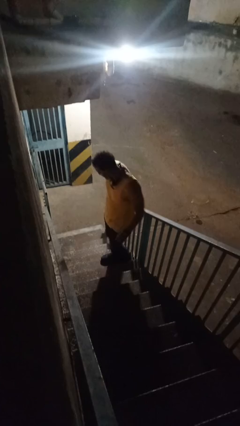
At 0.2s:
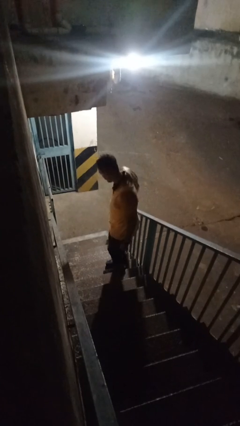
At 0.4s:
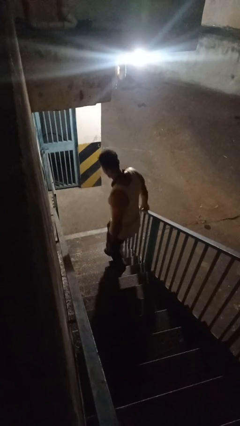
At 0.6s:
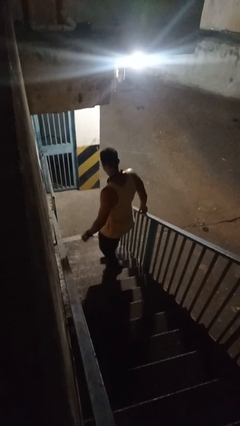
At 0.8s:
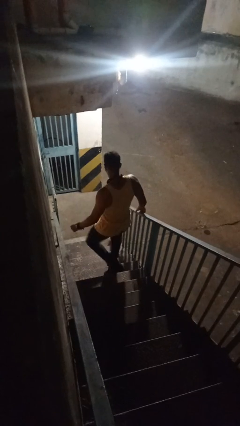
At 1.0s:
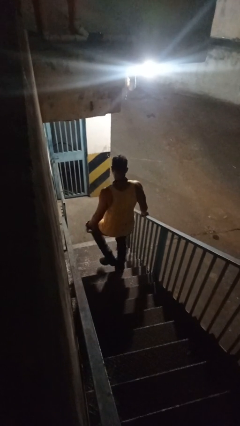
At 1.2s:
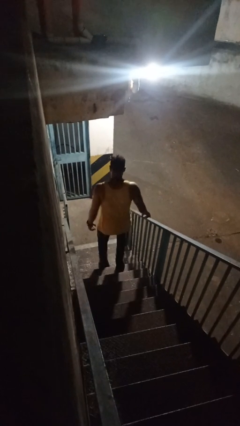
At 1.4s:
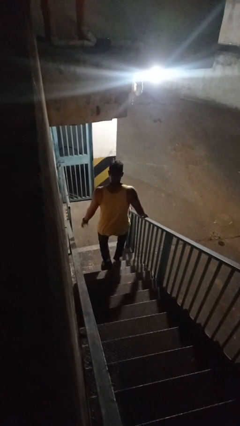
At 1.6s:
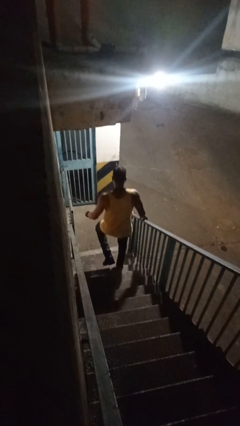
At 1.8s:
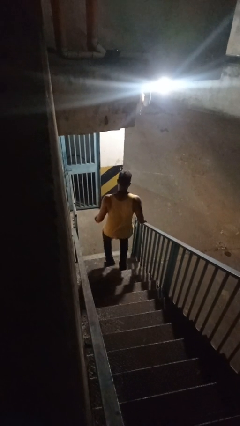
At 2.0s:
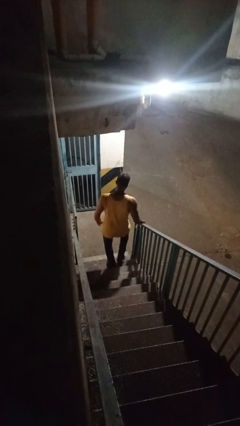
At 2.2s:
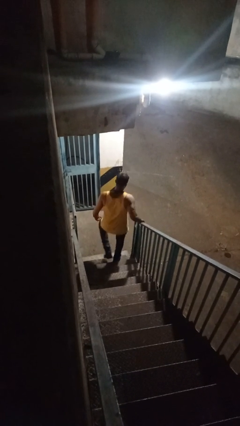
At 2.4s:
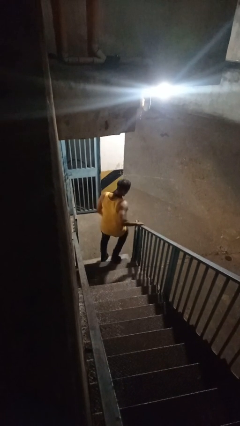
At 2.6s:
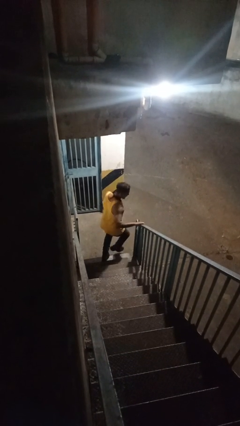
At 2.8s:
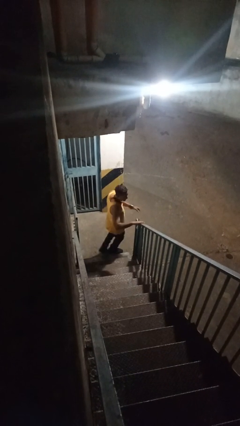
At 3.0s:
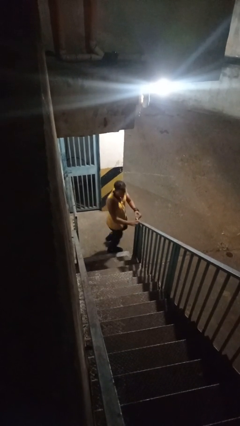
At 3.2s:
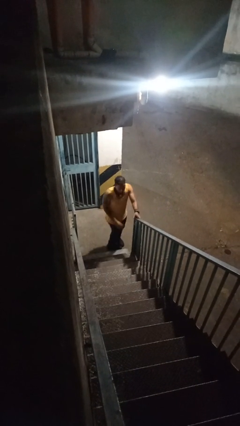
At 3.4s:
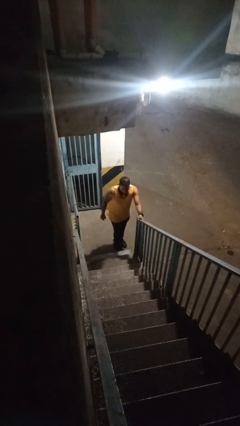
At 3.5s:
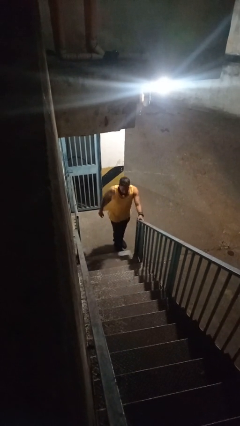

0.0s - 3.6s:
person climbs down stairs

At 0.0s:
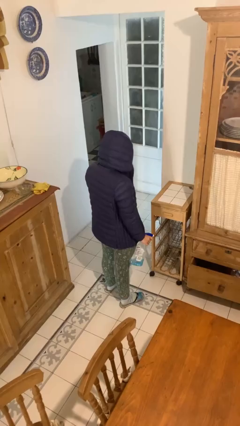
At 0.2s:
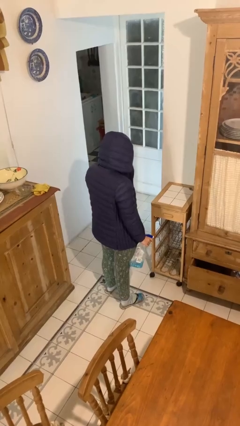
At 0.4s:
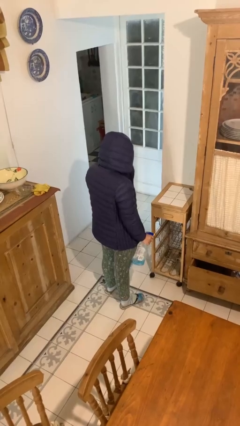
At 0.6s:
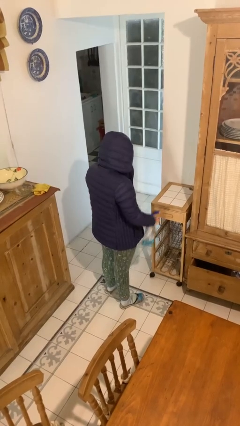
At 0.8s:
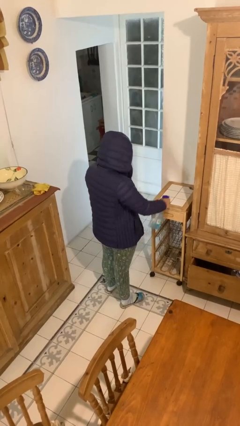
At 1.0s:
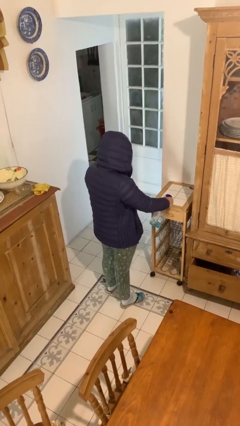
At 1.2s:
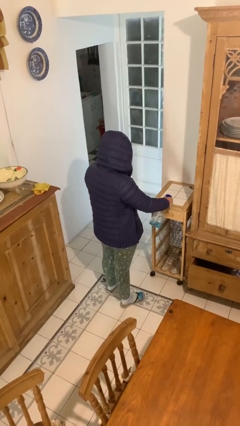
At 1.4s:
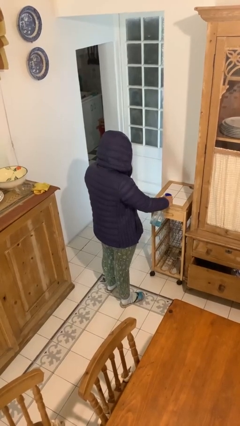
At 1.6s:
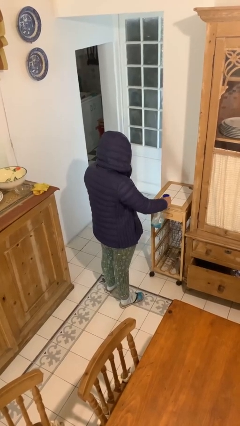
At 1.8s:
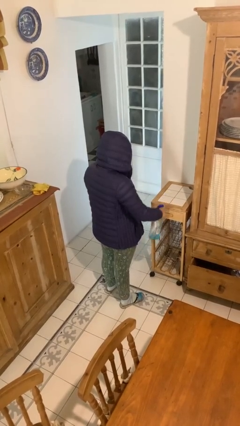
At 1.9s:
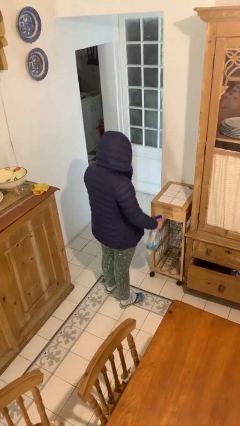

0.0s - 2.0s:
person sprays from bottle

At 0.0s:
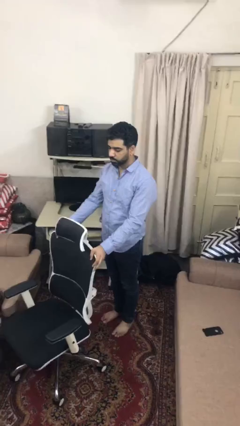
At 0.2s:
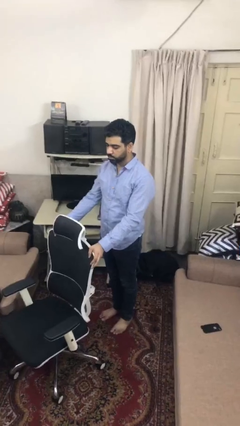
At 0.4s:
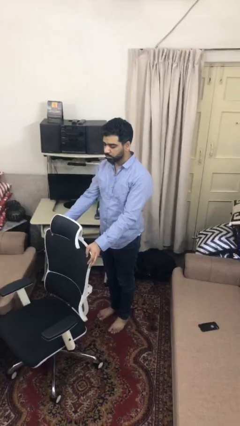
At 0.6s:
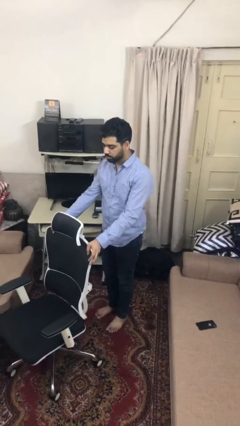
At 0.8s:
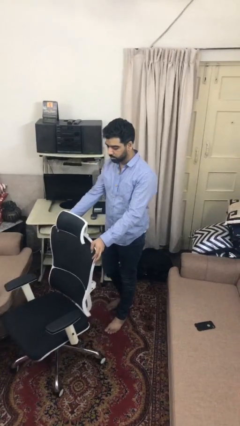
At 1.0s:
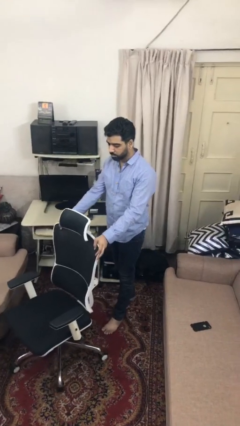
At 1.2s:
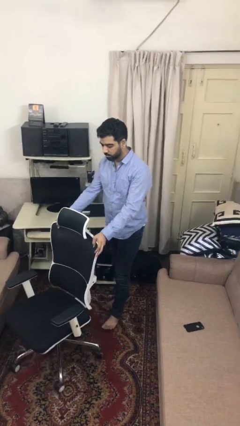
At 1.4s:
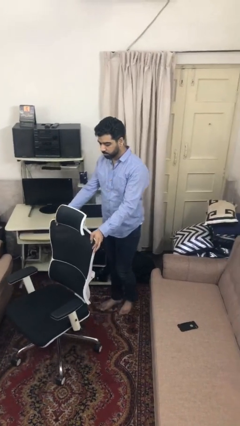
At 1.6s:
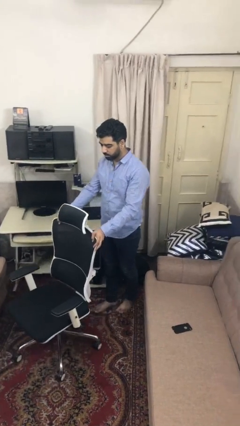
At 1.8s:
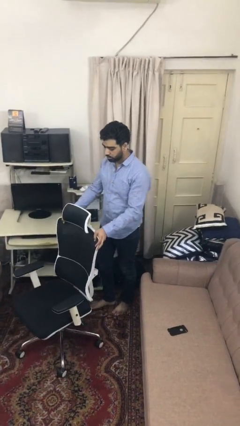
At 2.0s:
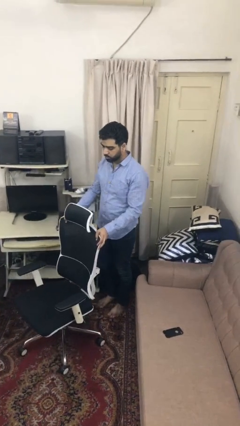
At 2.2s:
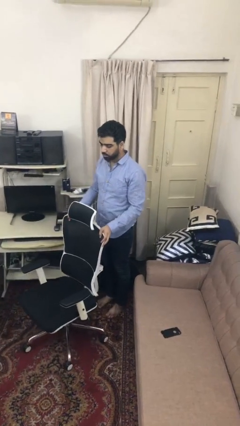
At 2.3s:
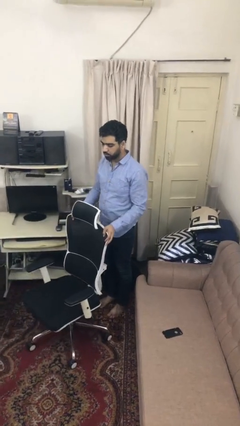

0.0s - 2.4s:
person pulls wheeled cart

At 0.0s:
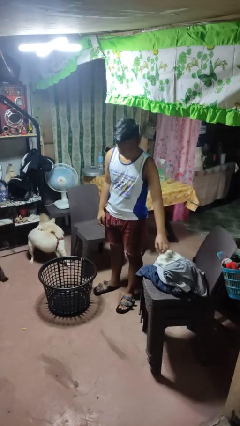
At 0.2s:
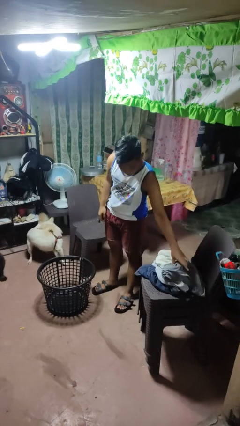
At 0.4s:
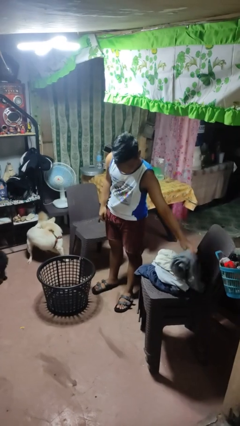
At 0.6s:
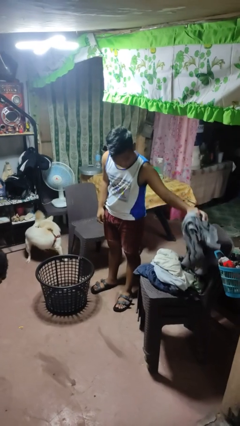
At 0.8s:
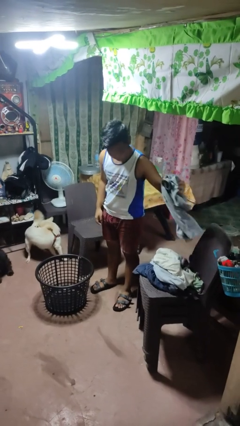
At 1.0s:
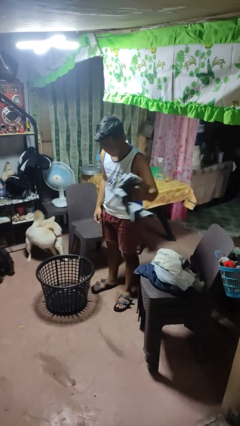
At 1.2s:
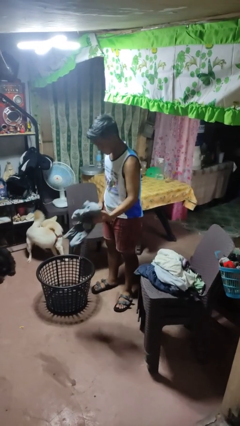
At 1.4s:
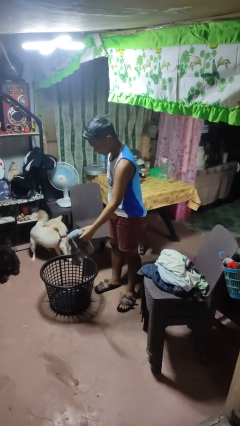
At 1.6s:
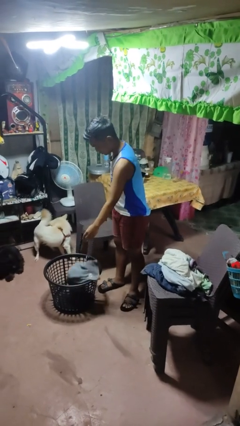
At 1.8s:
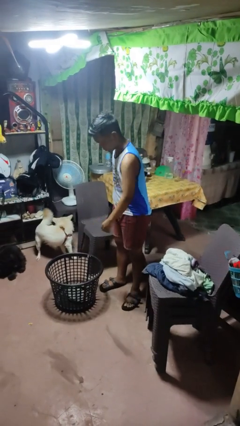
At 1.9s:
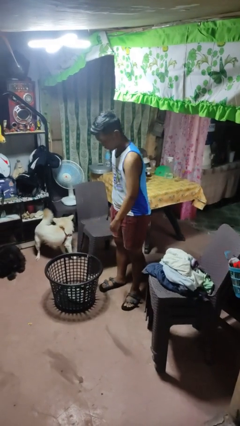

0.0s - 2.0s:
person puts object into basket

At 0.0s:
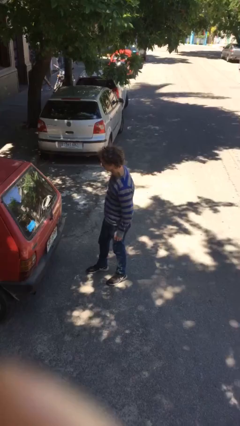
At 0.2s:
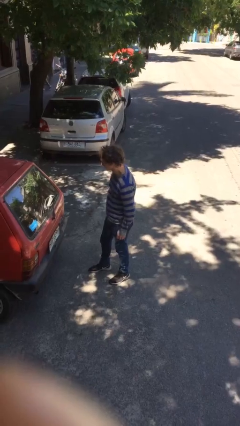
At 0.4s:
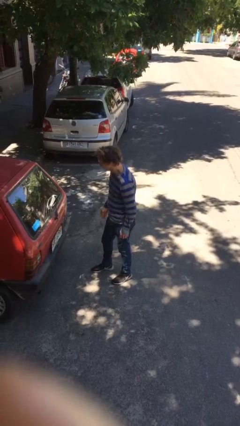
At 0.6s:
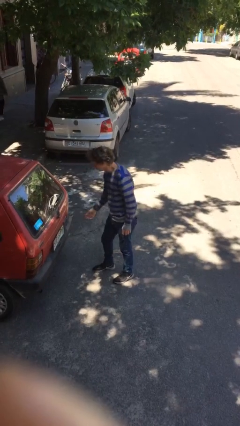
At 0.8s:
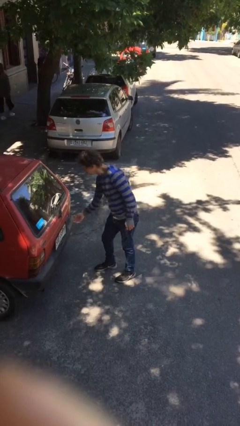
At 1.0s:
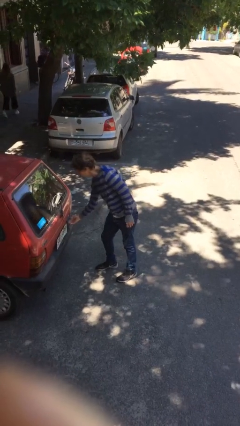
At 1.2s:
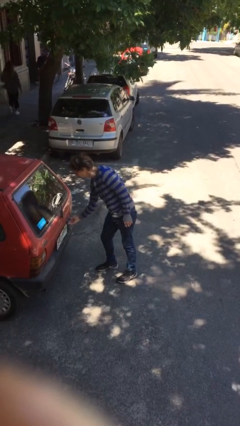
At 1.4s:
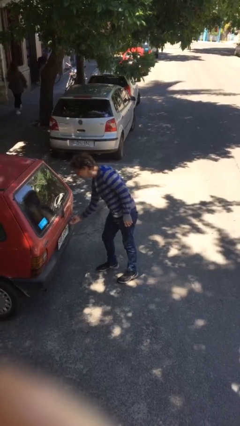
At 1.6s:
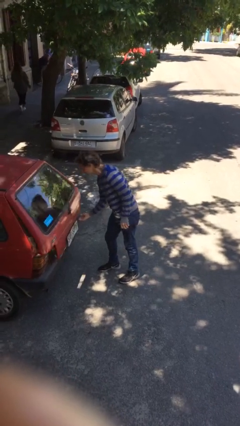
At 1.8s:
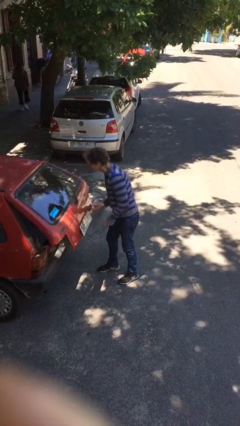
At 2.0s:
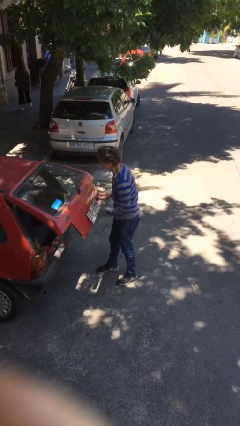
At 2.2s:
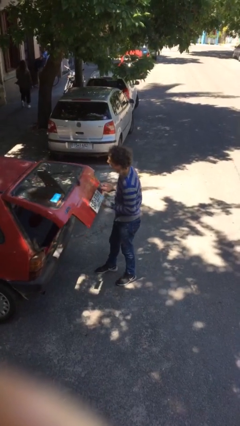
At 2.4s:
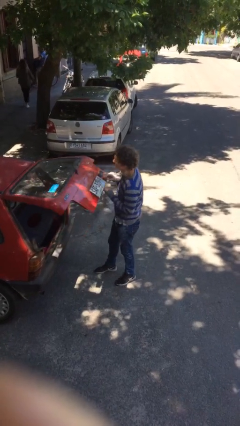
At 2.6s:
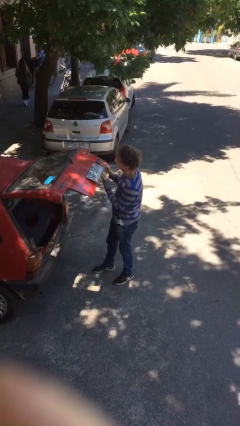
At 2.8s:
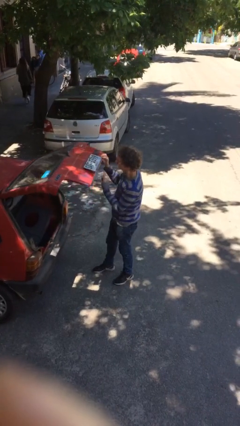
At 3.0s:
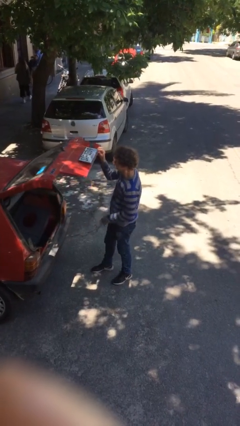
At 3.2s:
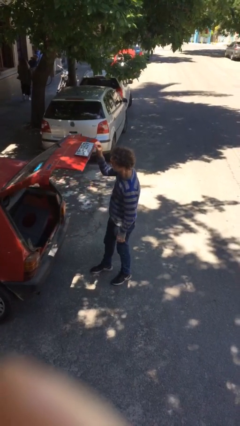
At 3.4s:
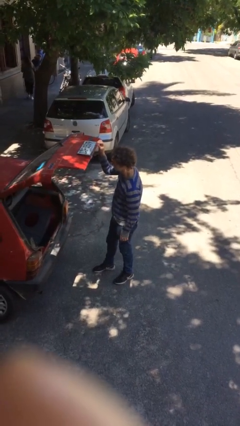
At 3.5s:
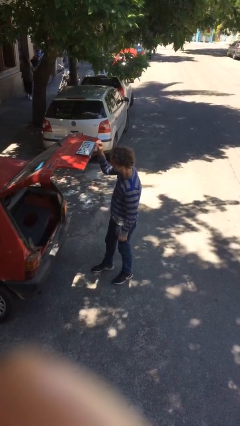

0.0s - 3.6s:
person opens car trunk

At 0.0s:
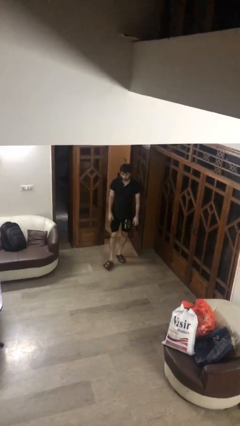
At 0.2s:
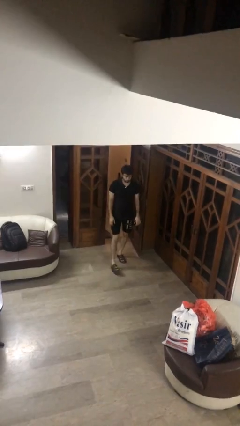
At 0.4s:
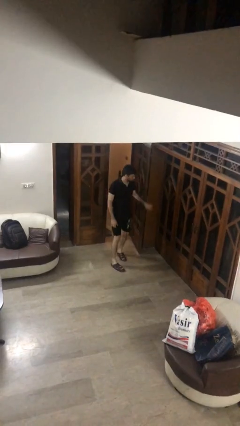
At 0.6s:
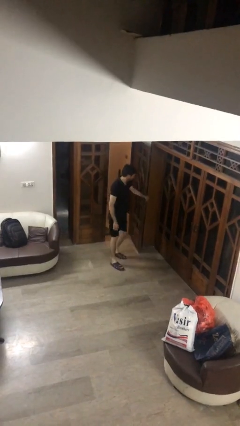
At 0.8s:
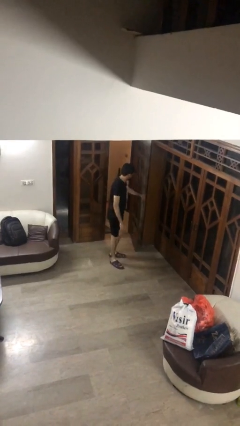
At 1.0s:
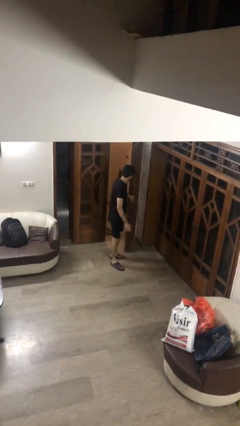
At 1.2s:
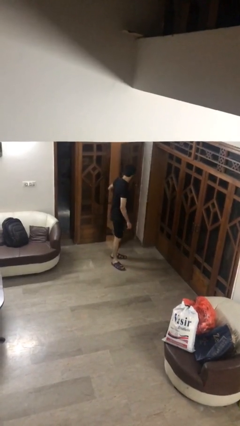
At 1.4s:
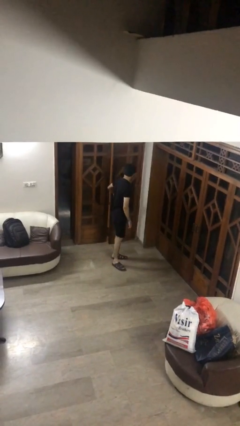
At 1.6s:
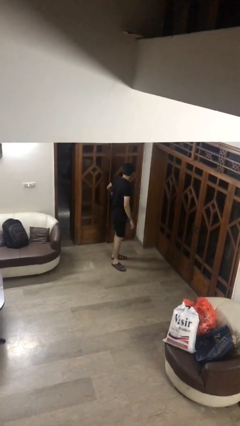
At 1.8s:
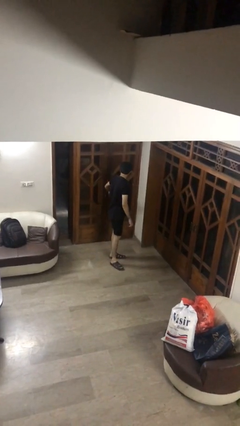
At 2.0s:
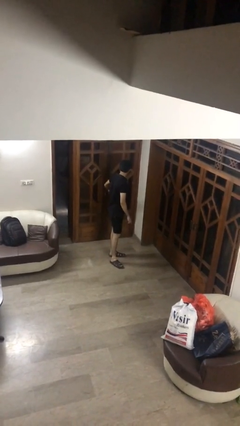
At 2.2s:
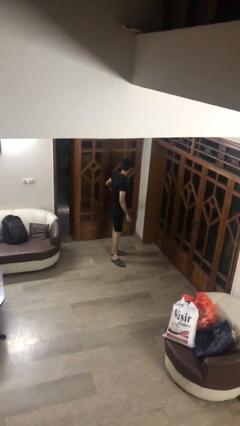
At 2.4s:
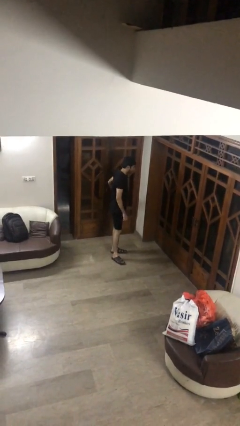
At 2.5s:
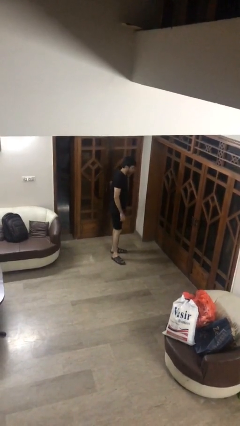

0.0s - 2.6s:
person closes facility door

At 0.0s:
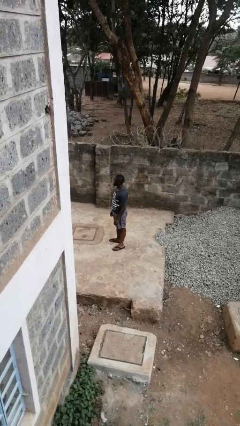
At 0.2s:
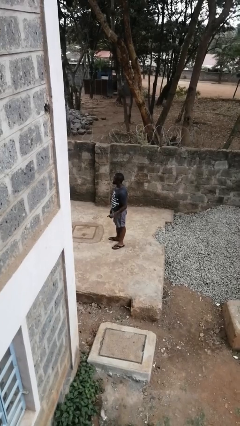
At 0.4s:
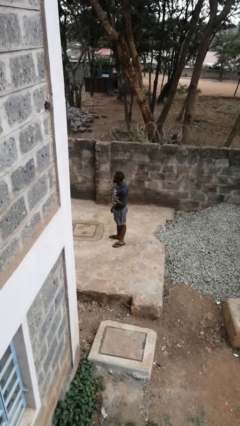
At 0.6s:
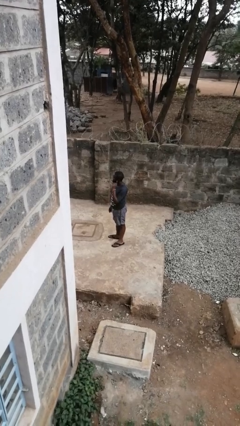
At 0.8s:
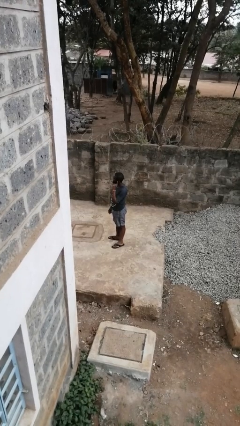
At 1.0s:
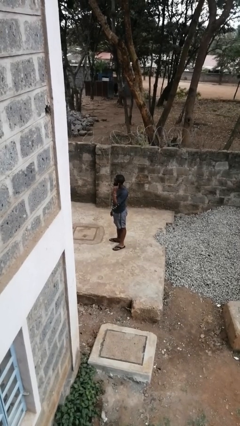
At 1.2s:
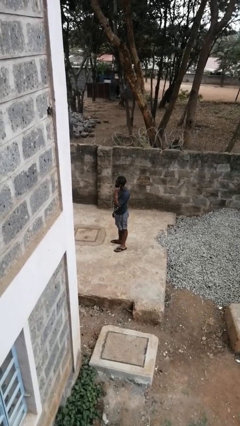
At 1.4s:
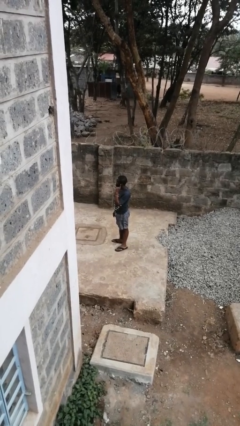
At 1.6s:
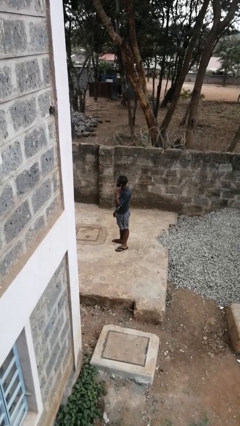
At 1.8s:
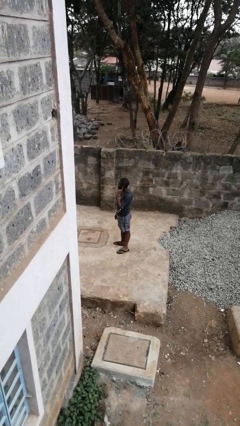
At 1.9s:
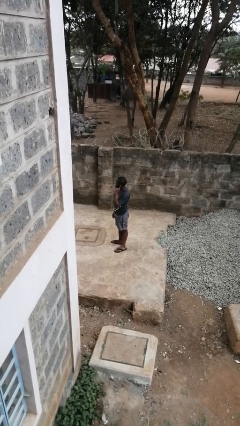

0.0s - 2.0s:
person gestures listen closely
